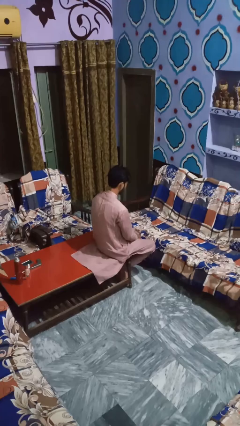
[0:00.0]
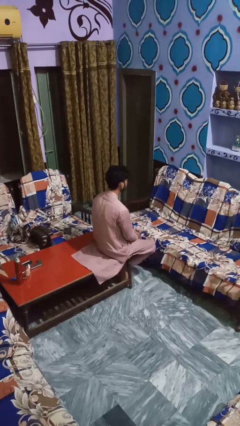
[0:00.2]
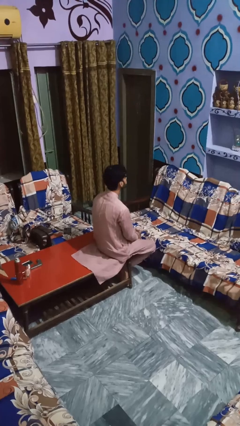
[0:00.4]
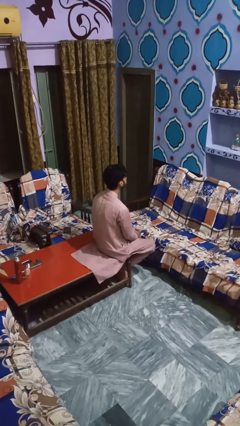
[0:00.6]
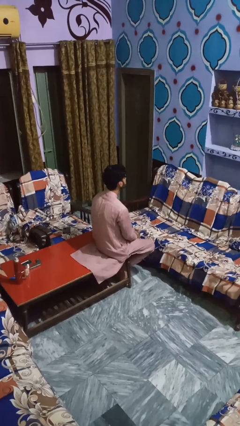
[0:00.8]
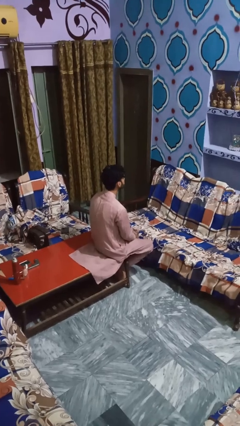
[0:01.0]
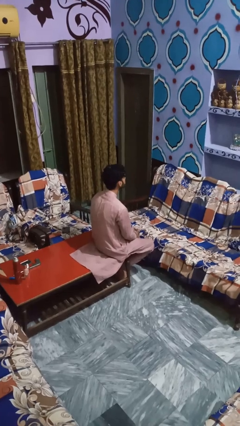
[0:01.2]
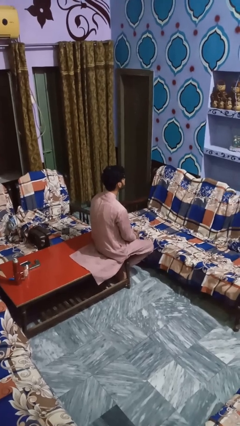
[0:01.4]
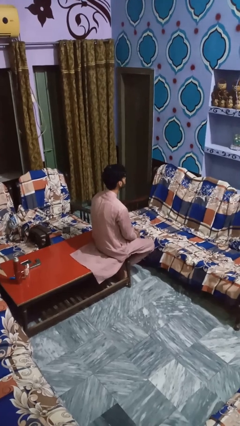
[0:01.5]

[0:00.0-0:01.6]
person shakes head

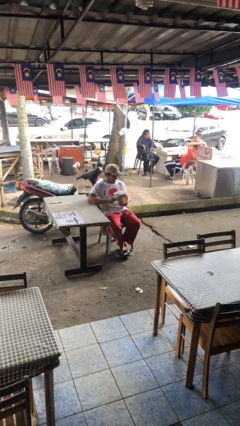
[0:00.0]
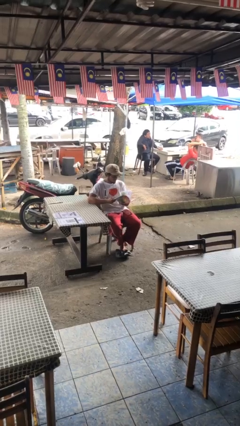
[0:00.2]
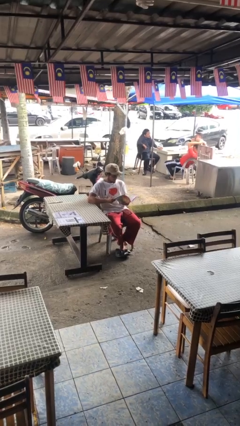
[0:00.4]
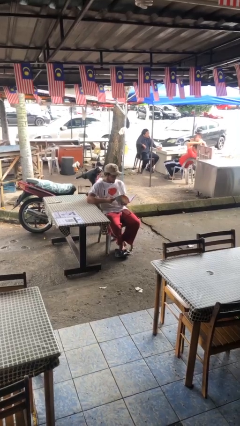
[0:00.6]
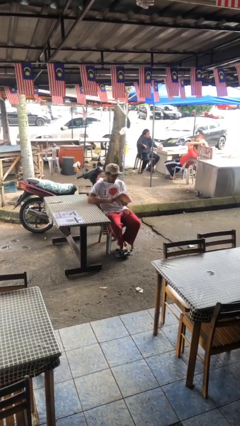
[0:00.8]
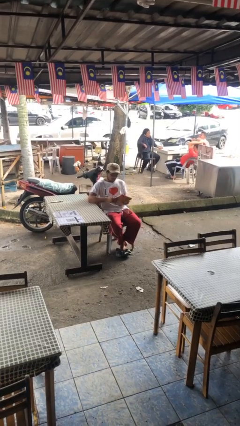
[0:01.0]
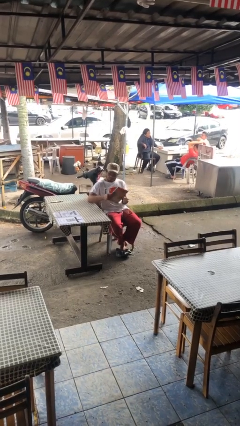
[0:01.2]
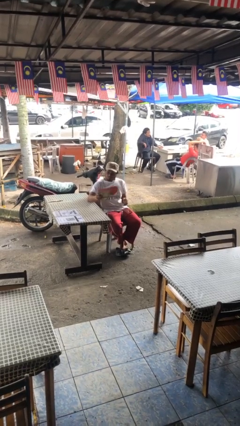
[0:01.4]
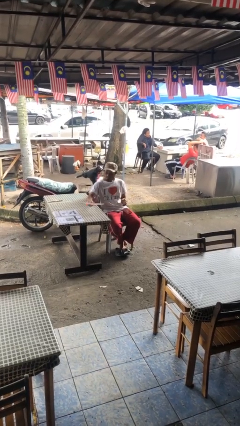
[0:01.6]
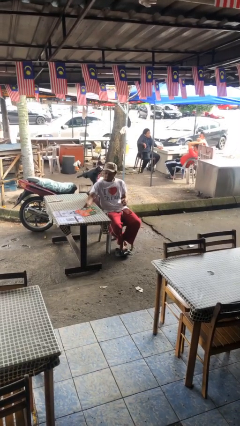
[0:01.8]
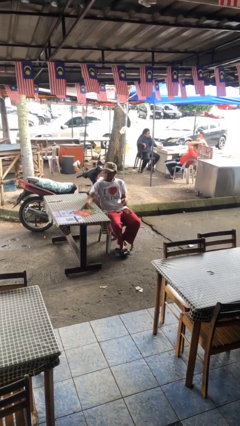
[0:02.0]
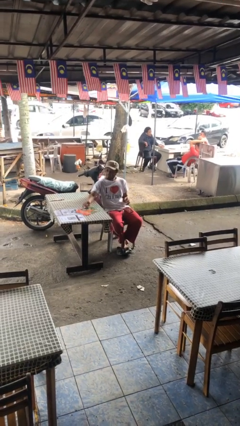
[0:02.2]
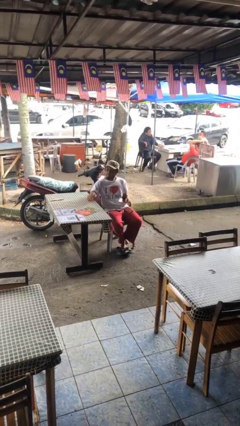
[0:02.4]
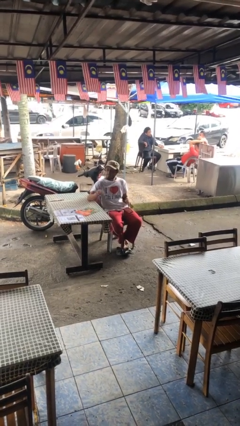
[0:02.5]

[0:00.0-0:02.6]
person puts down object on table

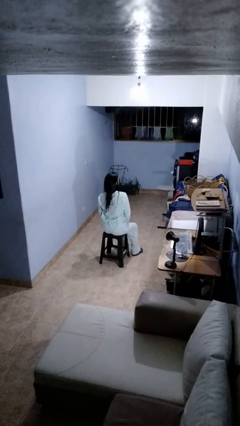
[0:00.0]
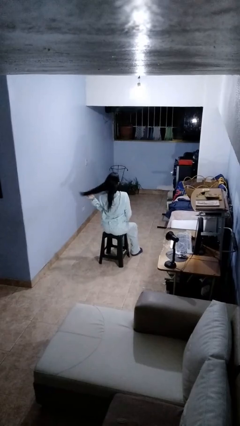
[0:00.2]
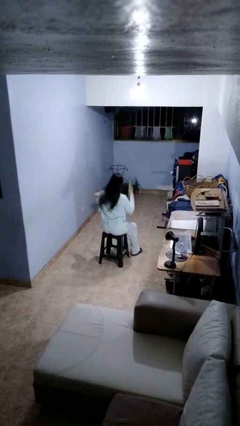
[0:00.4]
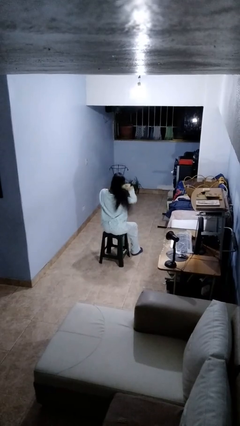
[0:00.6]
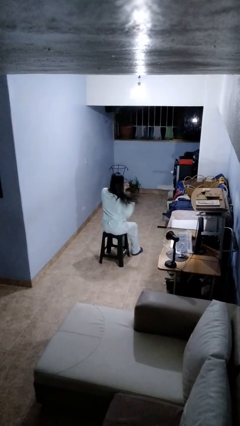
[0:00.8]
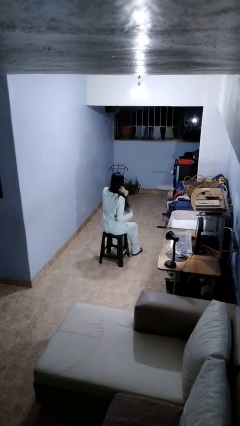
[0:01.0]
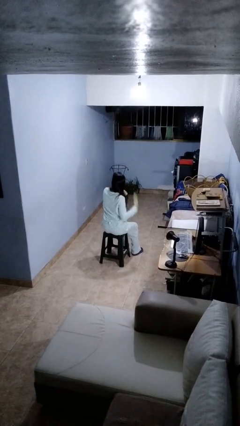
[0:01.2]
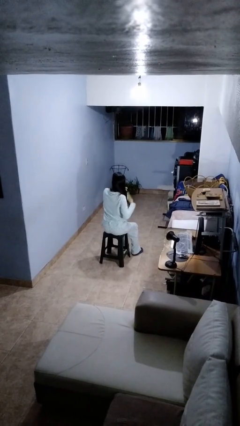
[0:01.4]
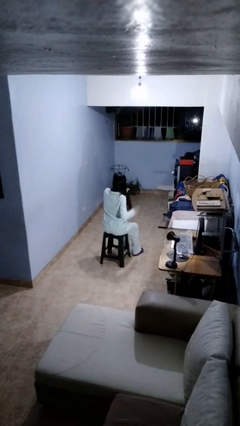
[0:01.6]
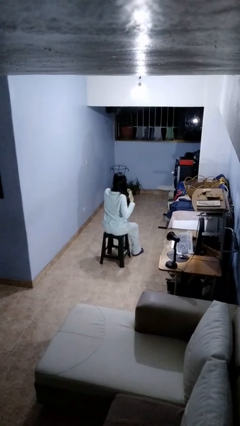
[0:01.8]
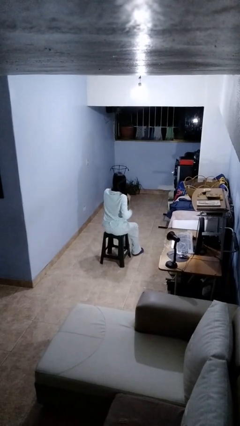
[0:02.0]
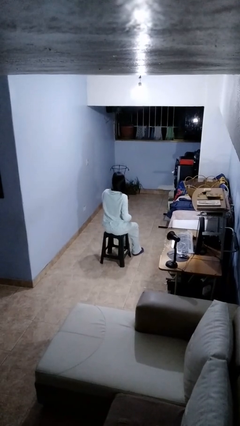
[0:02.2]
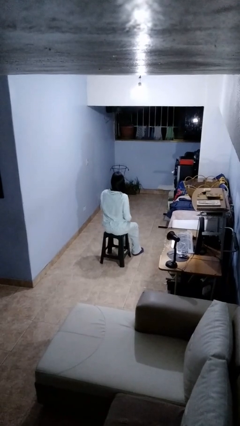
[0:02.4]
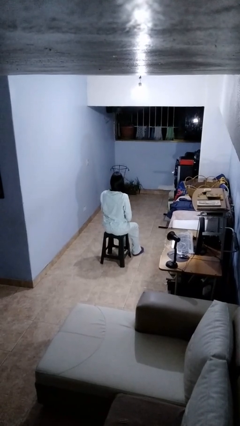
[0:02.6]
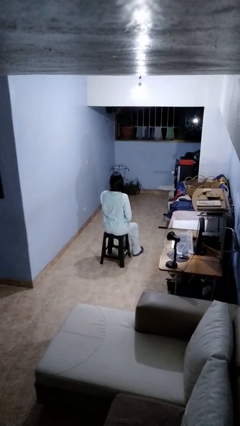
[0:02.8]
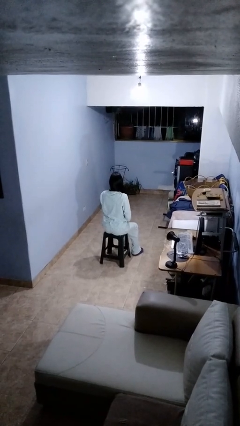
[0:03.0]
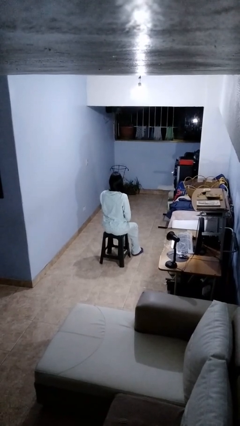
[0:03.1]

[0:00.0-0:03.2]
person brushes hair

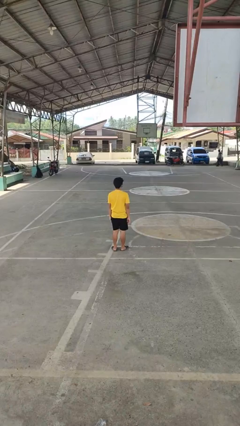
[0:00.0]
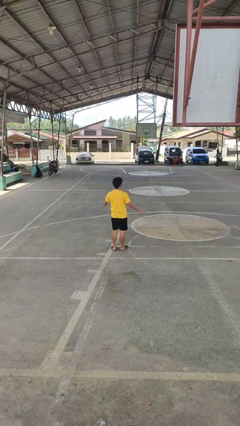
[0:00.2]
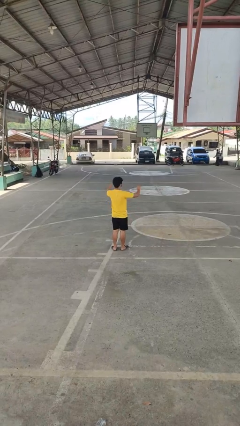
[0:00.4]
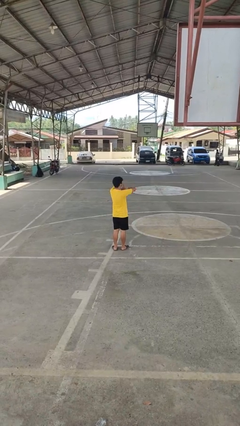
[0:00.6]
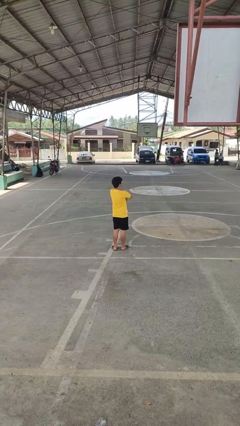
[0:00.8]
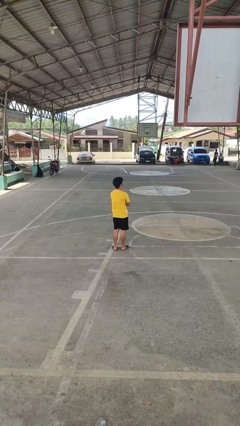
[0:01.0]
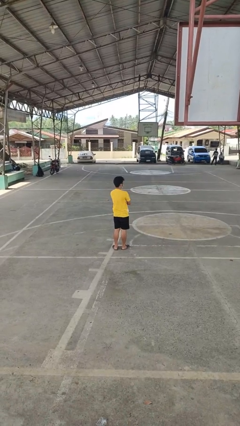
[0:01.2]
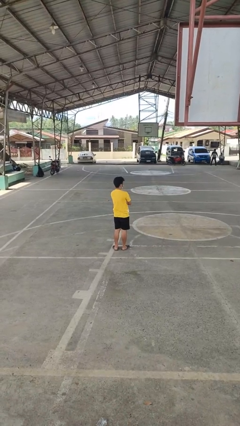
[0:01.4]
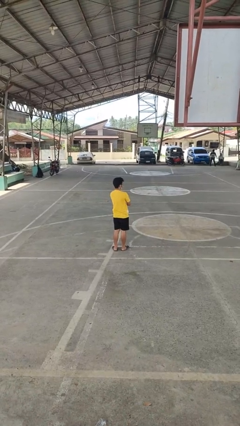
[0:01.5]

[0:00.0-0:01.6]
person crosses arms

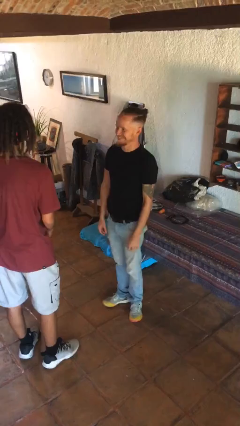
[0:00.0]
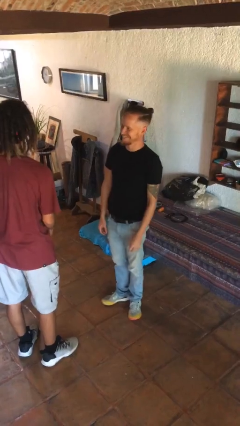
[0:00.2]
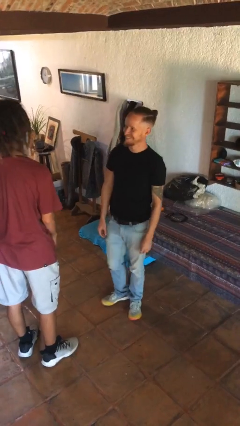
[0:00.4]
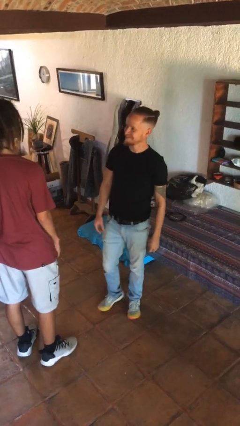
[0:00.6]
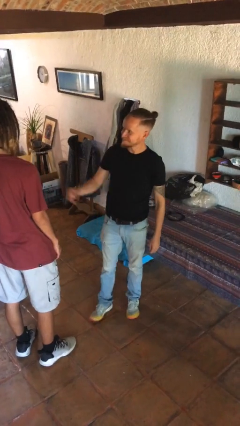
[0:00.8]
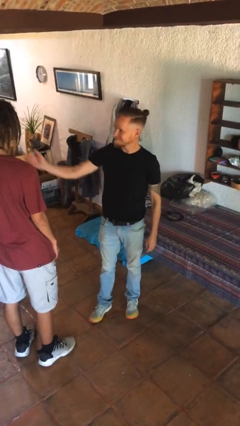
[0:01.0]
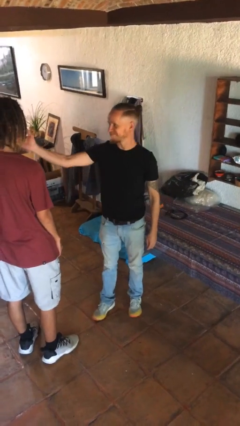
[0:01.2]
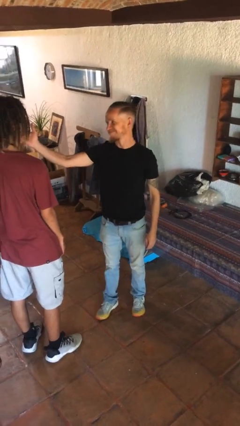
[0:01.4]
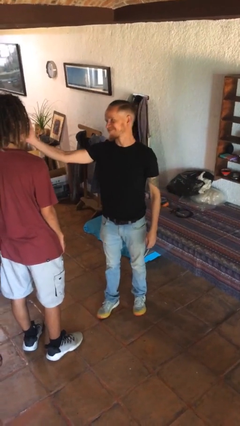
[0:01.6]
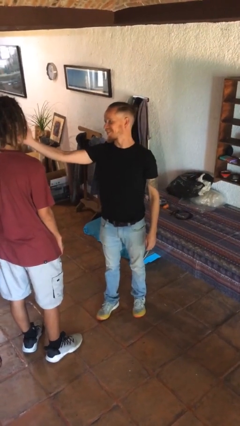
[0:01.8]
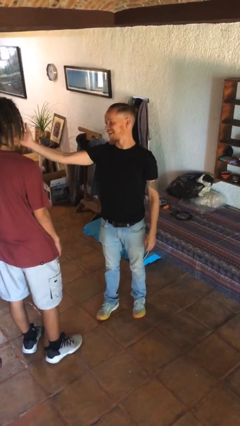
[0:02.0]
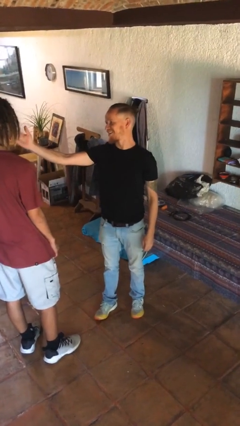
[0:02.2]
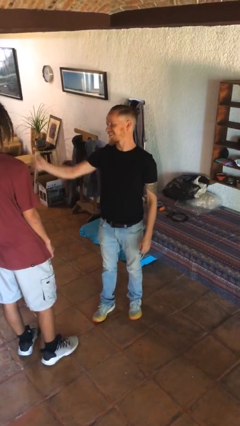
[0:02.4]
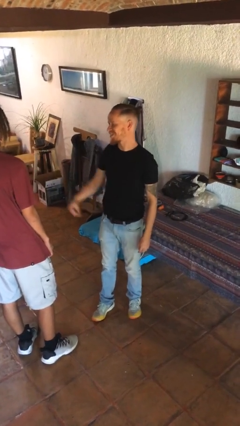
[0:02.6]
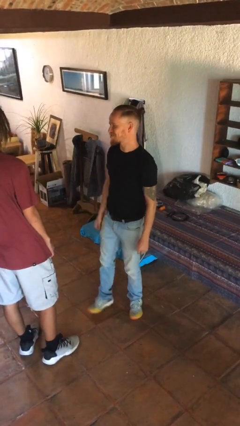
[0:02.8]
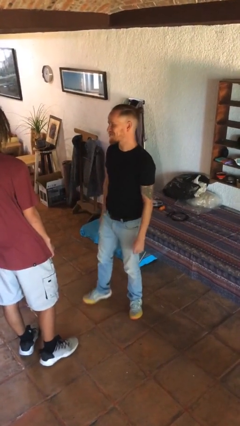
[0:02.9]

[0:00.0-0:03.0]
person touches face of person

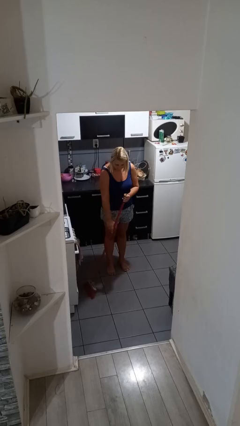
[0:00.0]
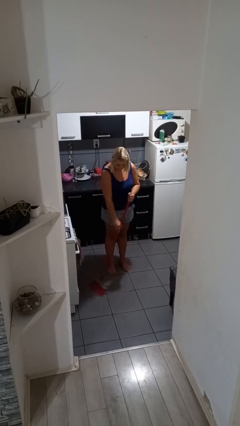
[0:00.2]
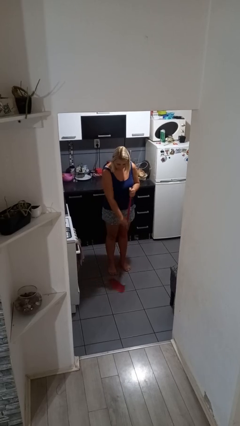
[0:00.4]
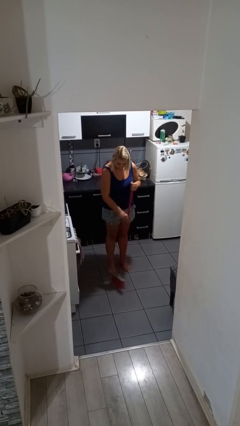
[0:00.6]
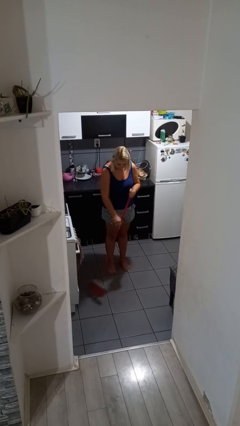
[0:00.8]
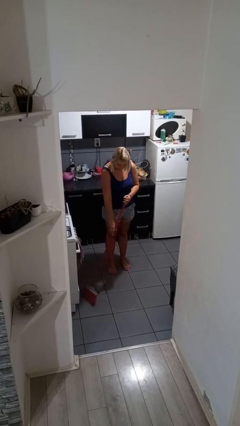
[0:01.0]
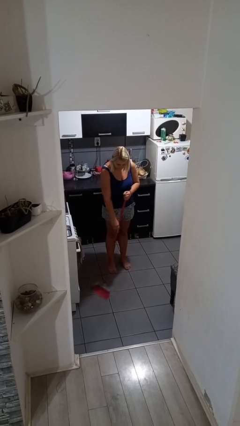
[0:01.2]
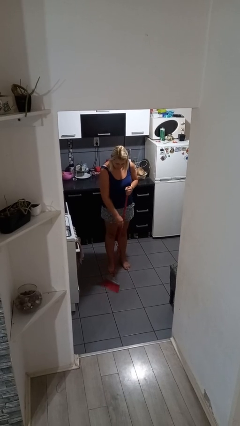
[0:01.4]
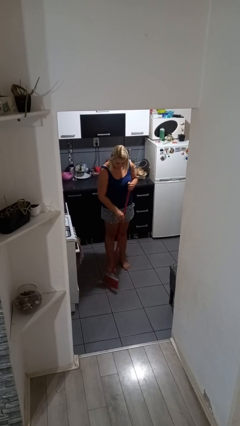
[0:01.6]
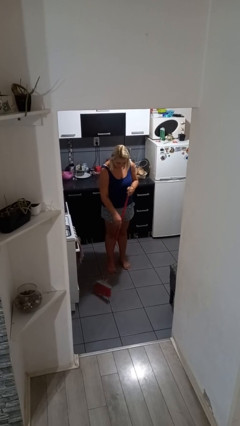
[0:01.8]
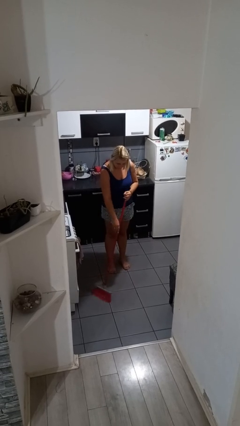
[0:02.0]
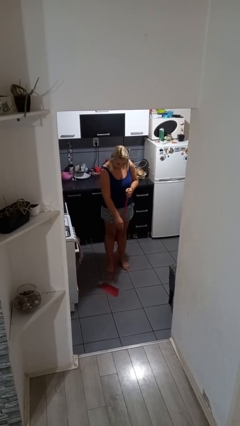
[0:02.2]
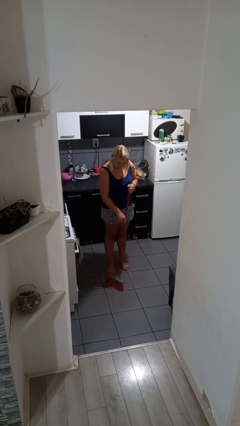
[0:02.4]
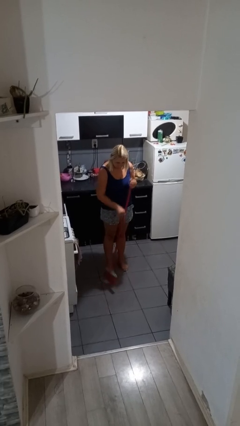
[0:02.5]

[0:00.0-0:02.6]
person sweeps floor

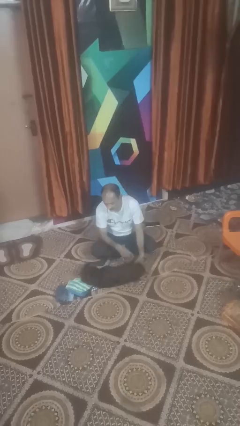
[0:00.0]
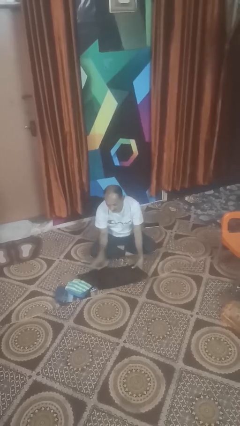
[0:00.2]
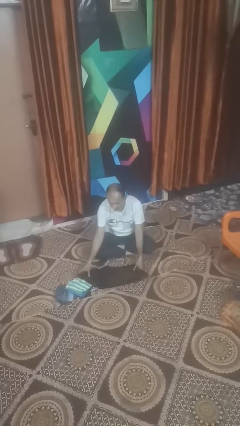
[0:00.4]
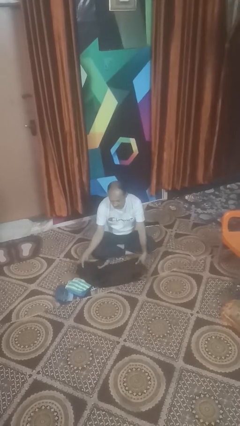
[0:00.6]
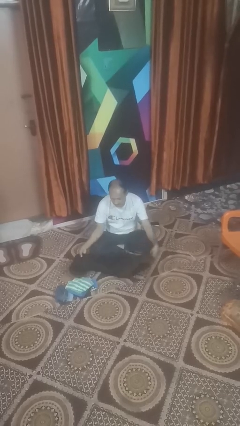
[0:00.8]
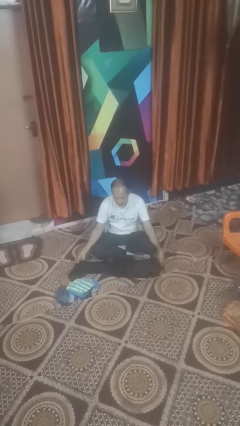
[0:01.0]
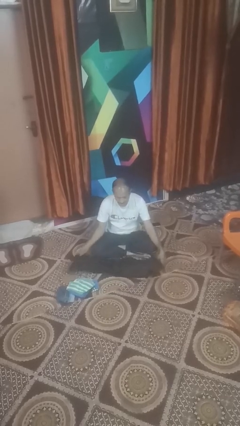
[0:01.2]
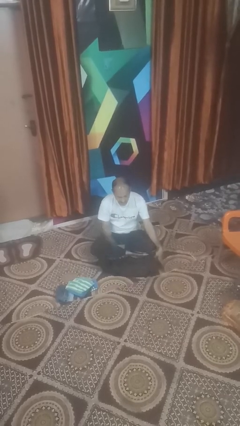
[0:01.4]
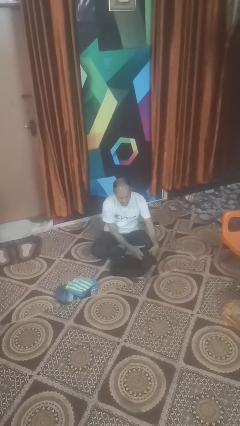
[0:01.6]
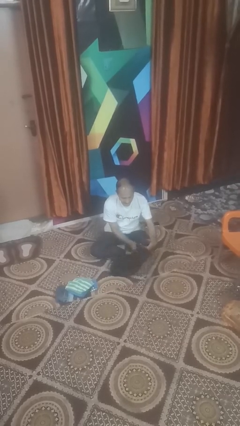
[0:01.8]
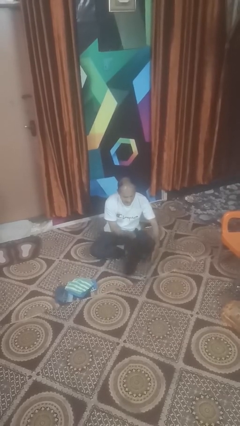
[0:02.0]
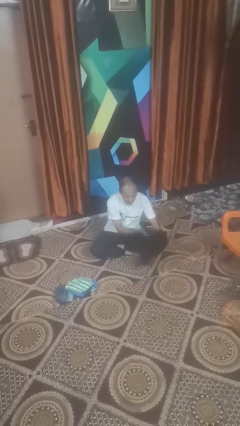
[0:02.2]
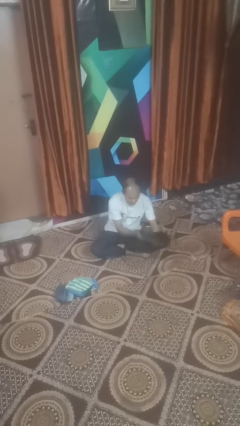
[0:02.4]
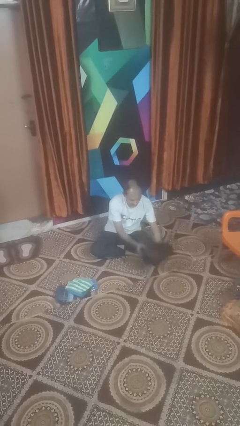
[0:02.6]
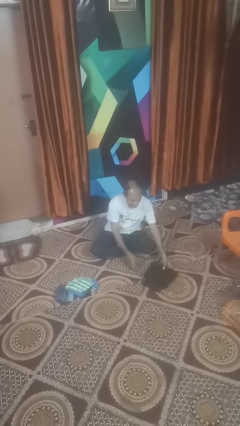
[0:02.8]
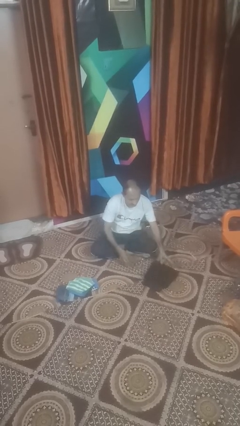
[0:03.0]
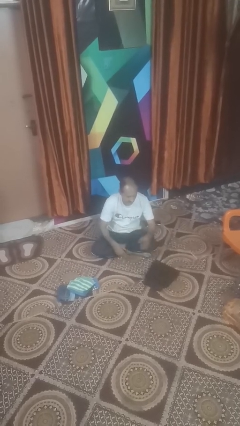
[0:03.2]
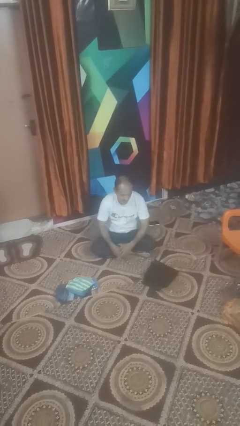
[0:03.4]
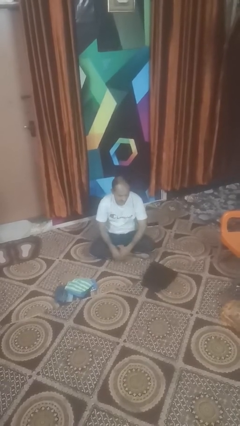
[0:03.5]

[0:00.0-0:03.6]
person folds pants
